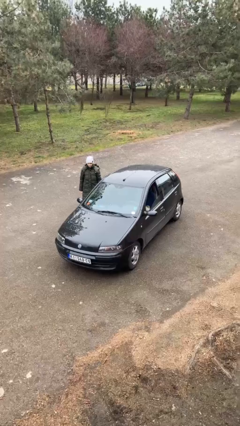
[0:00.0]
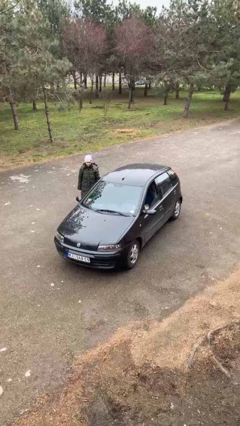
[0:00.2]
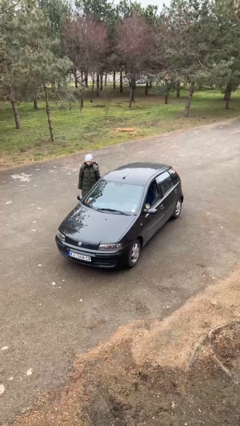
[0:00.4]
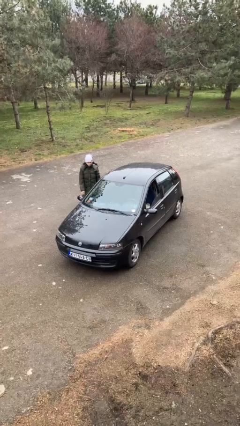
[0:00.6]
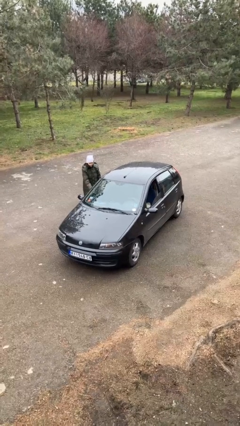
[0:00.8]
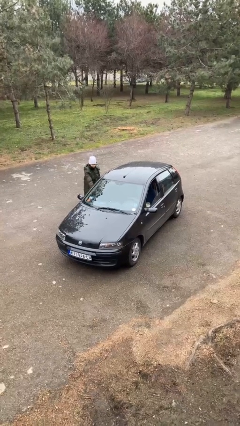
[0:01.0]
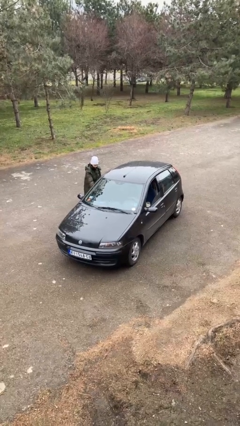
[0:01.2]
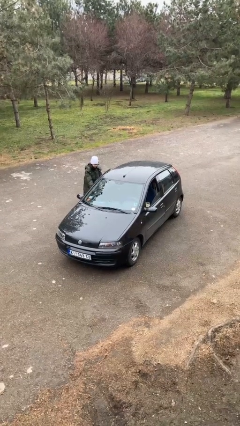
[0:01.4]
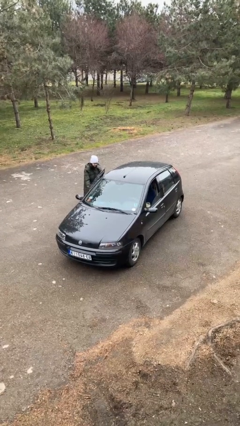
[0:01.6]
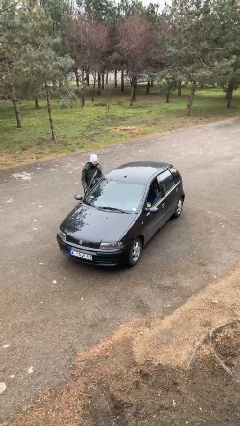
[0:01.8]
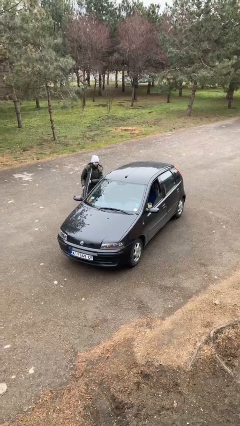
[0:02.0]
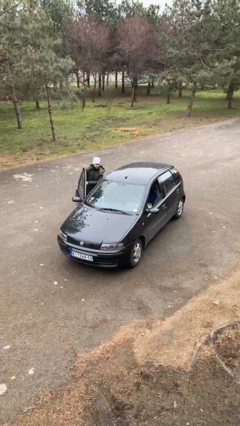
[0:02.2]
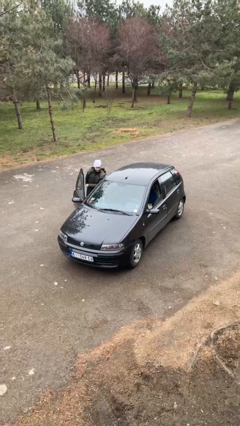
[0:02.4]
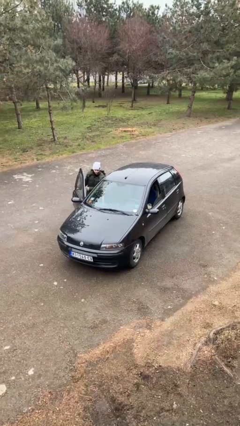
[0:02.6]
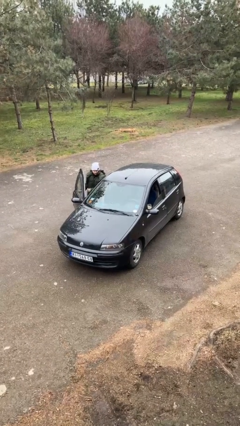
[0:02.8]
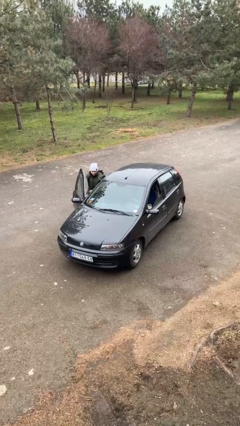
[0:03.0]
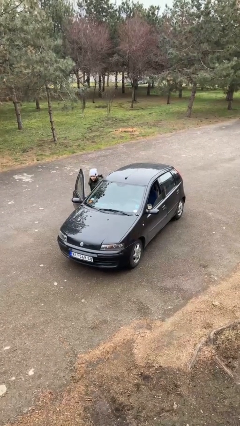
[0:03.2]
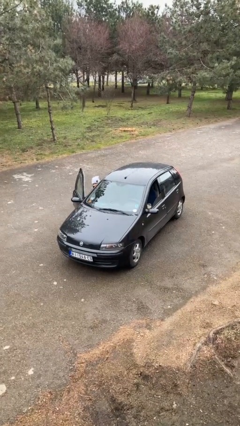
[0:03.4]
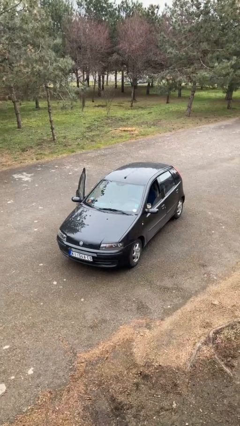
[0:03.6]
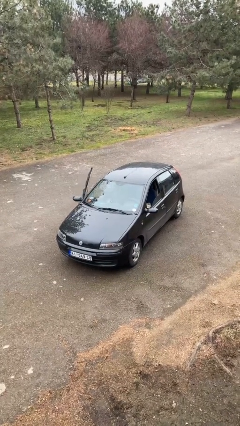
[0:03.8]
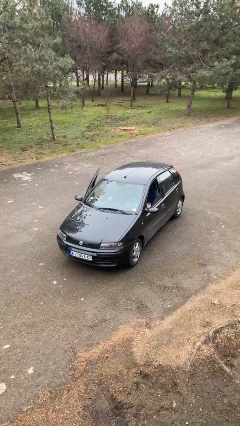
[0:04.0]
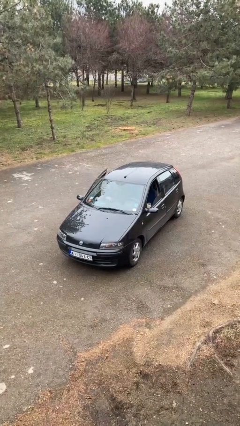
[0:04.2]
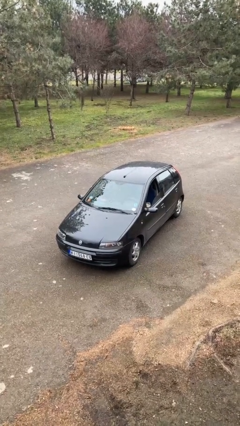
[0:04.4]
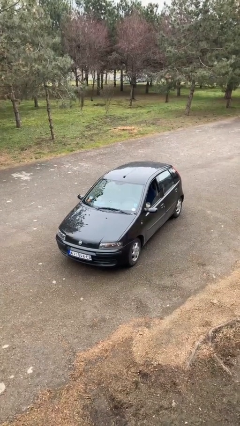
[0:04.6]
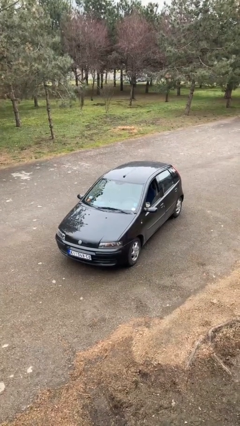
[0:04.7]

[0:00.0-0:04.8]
car picks up person

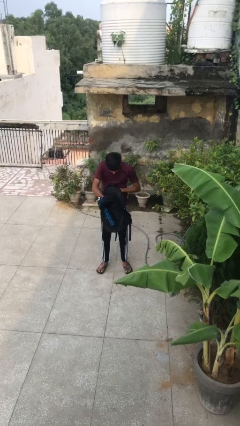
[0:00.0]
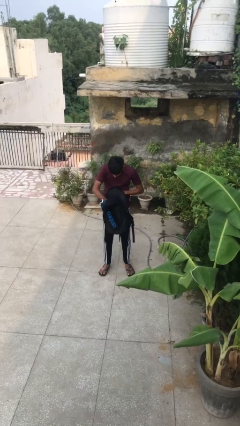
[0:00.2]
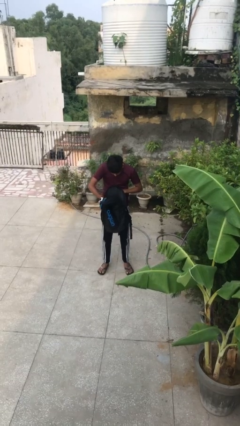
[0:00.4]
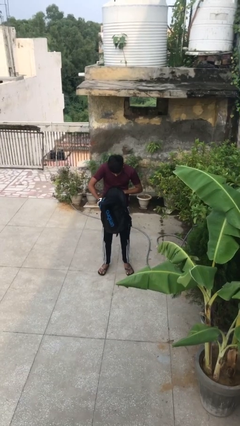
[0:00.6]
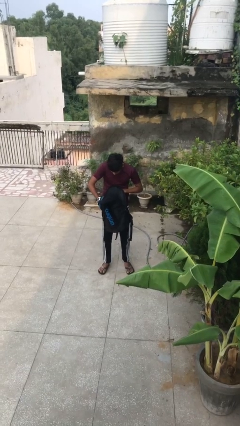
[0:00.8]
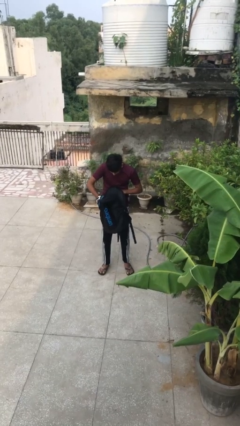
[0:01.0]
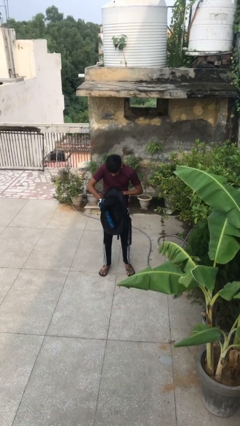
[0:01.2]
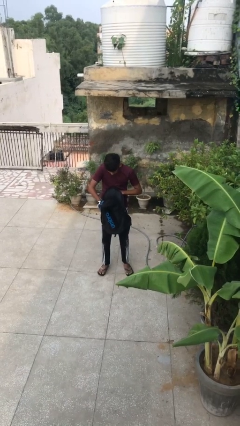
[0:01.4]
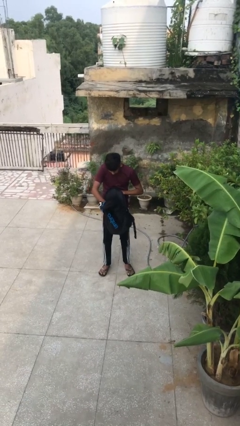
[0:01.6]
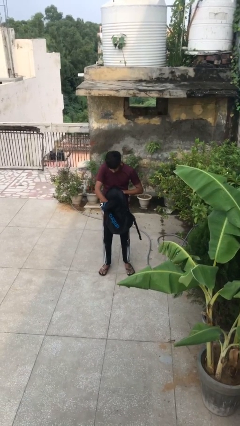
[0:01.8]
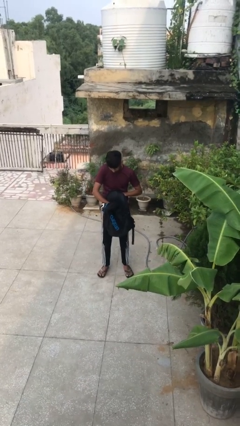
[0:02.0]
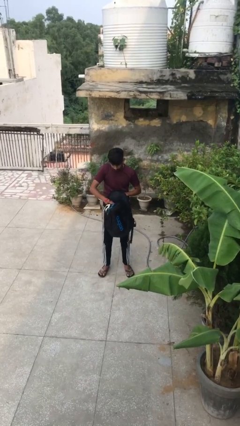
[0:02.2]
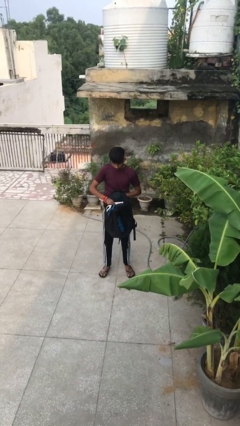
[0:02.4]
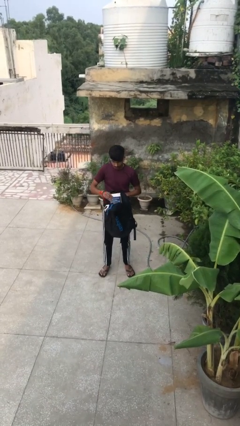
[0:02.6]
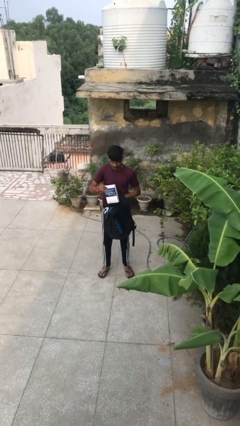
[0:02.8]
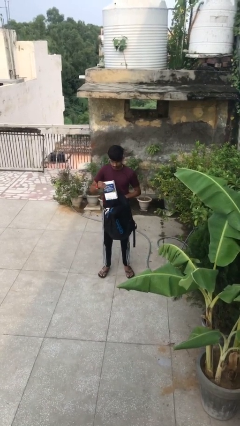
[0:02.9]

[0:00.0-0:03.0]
person searches in backpack

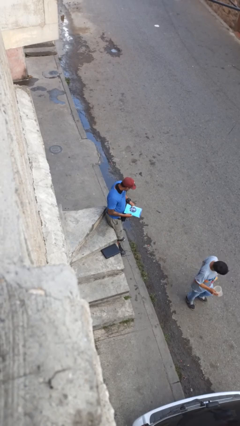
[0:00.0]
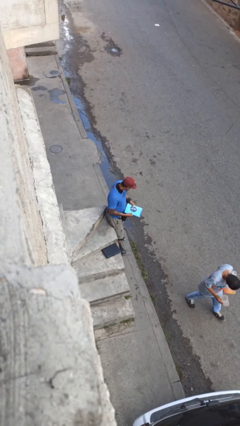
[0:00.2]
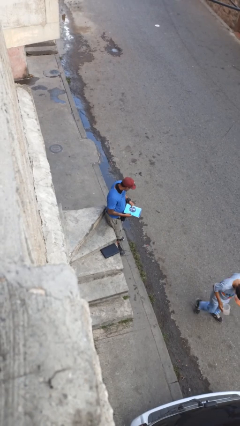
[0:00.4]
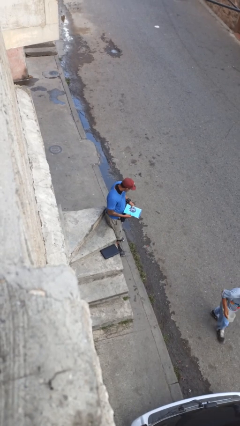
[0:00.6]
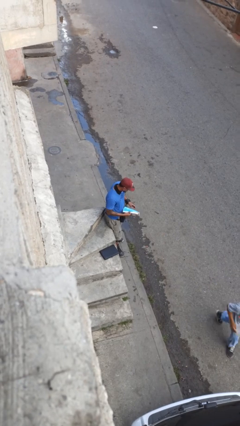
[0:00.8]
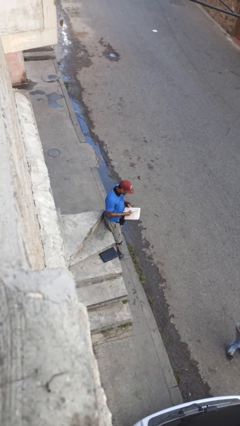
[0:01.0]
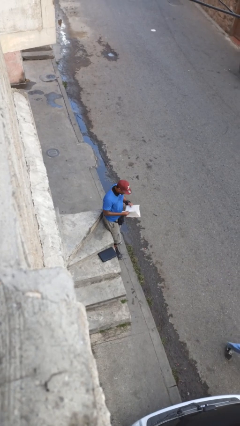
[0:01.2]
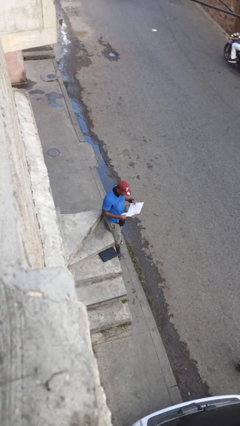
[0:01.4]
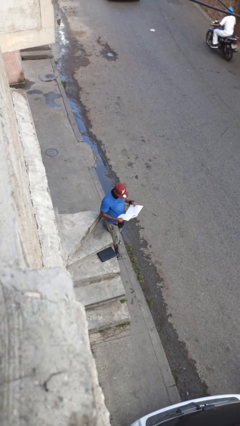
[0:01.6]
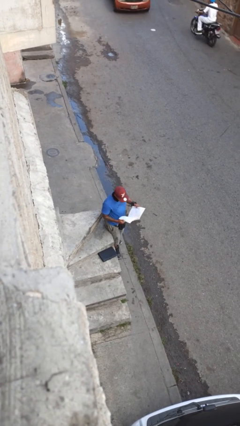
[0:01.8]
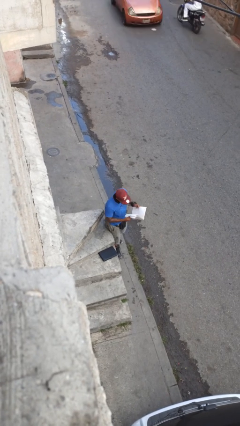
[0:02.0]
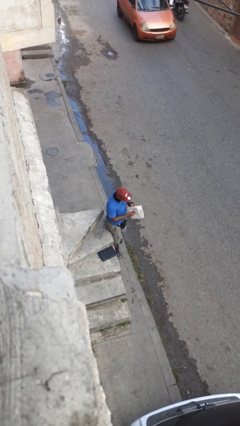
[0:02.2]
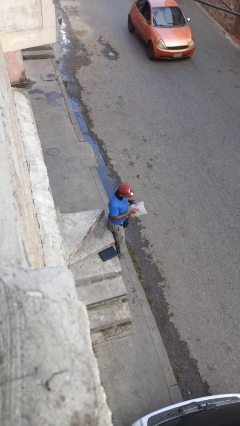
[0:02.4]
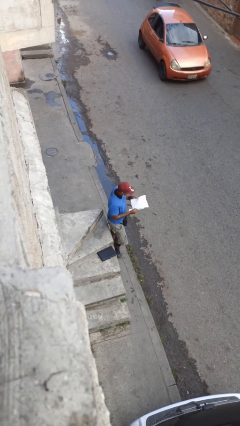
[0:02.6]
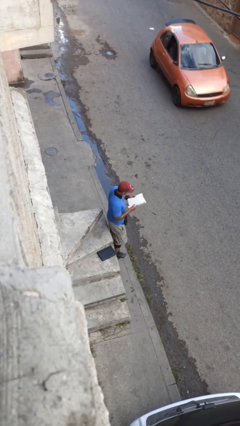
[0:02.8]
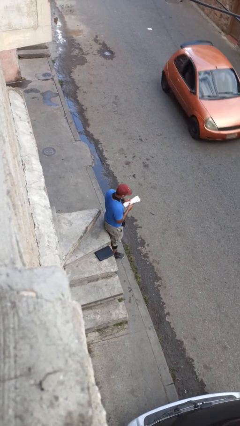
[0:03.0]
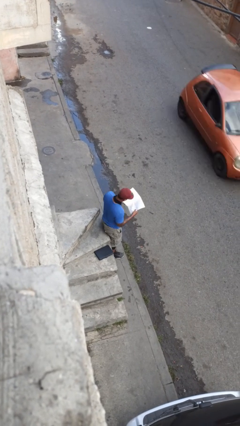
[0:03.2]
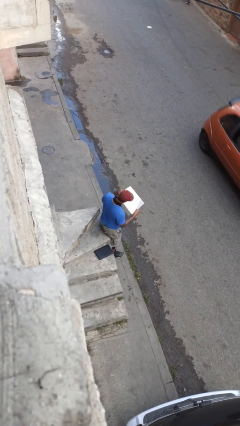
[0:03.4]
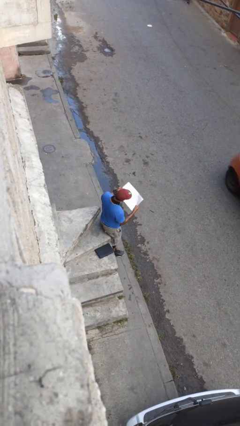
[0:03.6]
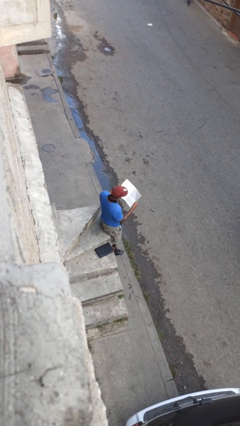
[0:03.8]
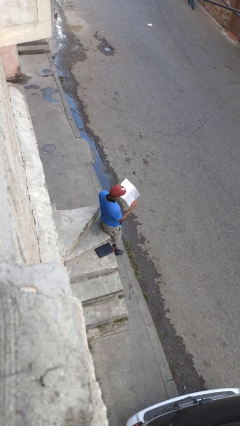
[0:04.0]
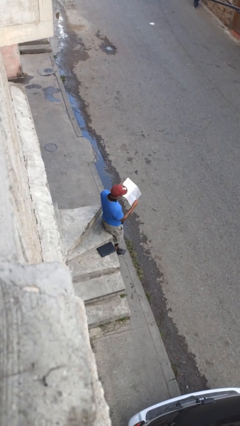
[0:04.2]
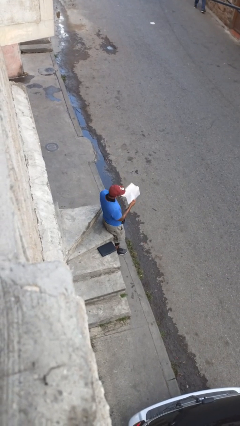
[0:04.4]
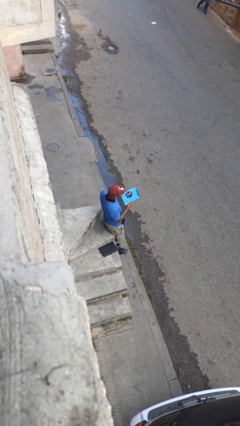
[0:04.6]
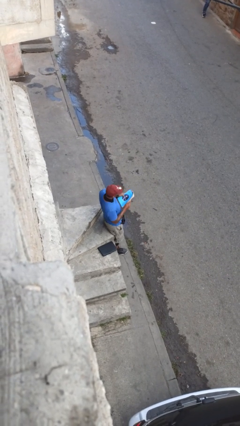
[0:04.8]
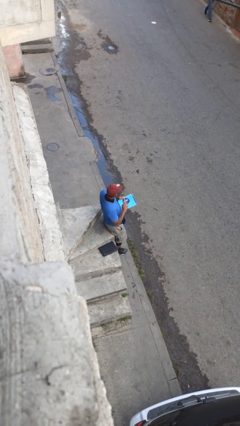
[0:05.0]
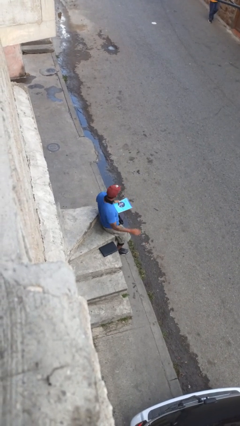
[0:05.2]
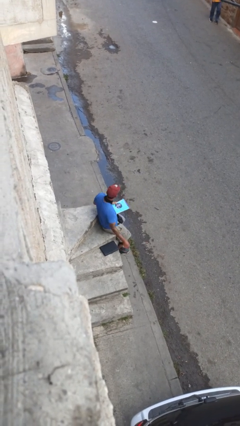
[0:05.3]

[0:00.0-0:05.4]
person reads document

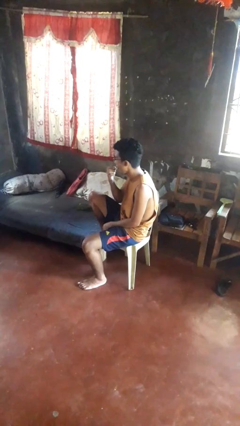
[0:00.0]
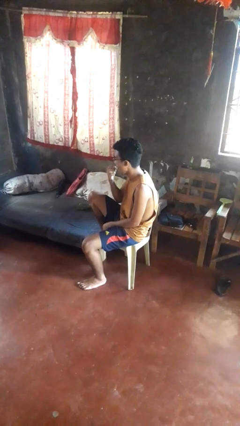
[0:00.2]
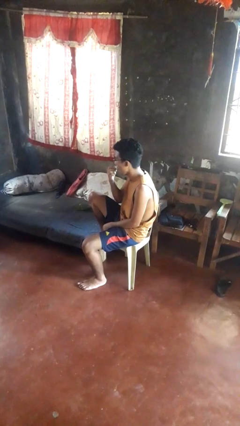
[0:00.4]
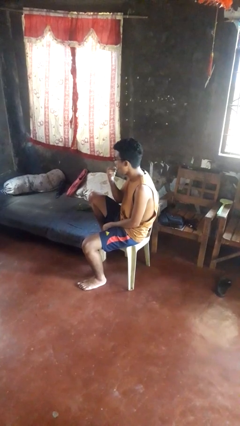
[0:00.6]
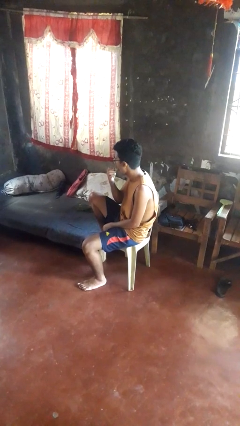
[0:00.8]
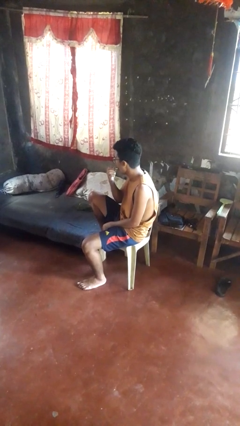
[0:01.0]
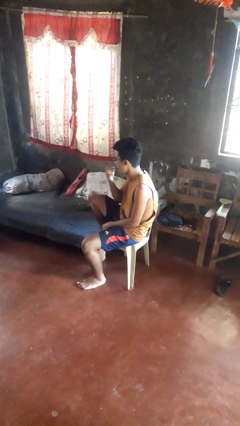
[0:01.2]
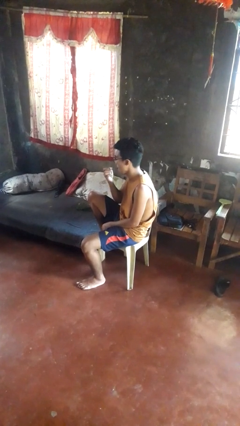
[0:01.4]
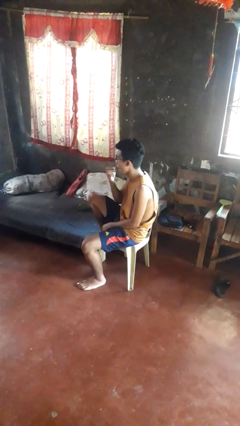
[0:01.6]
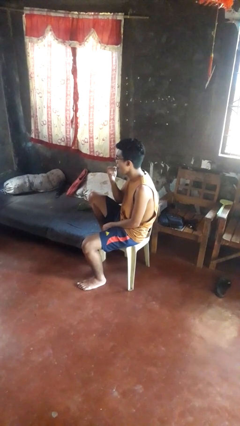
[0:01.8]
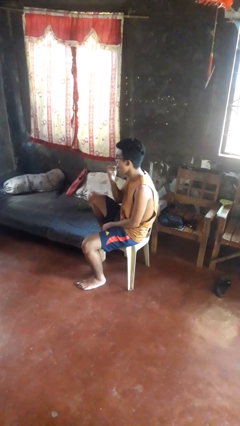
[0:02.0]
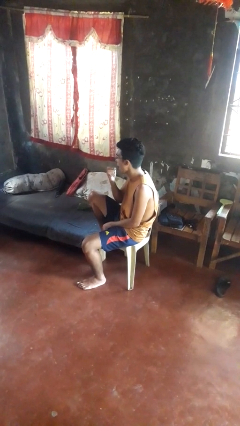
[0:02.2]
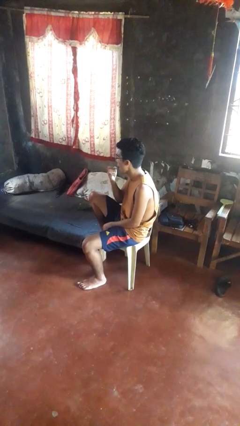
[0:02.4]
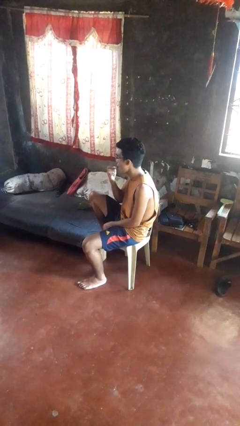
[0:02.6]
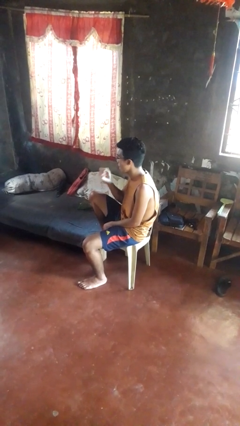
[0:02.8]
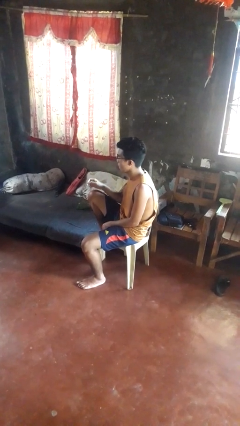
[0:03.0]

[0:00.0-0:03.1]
person applies lip makeup

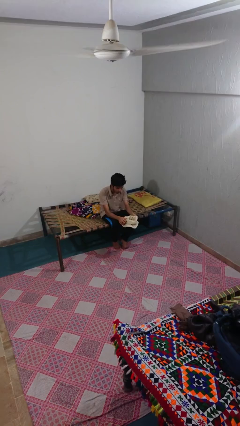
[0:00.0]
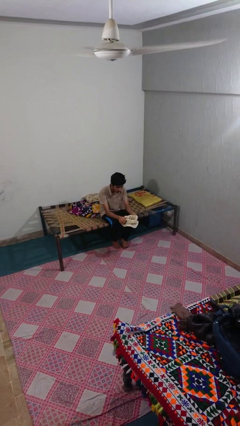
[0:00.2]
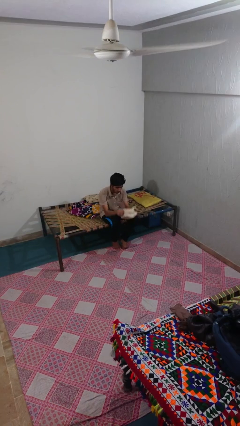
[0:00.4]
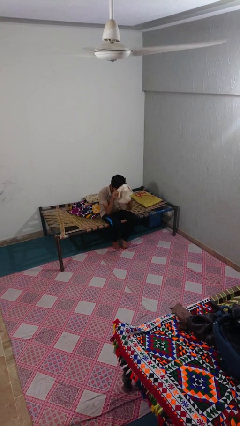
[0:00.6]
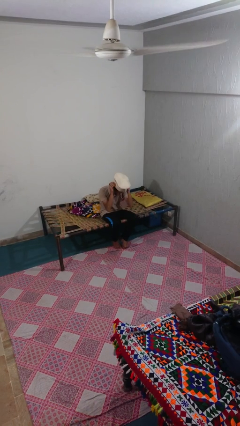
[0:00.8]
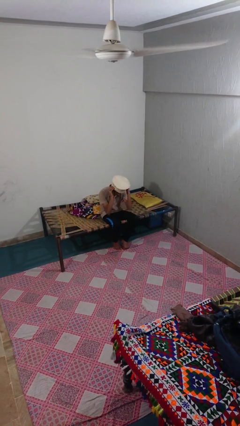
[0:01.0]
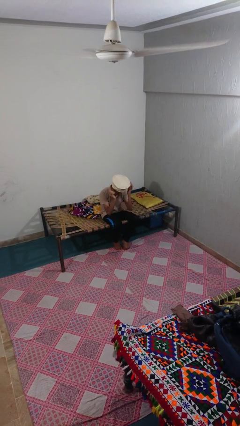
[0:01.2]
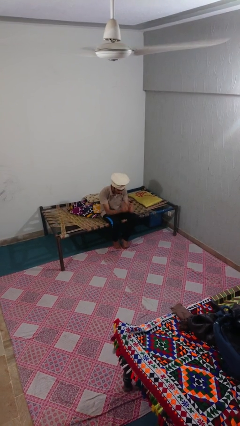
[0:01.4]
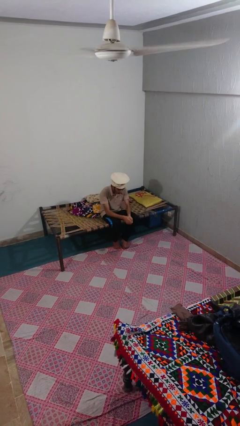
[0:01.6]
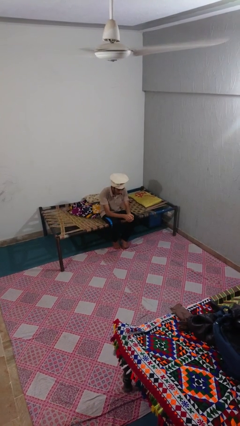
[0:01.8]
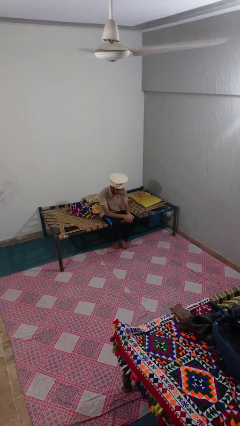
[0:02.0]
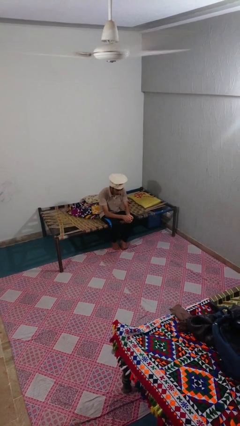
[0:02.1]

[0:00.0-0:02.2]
person puts on hat
